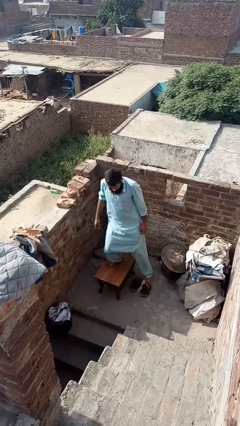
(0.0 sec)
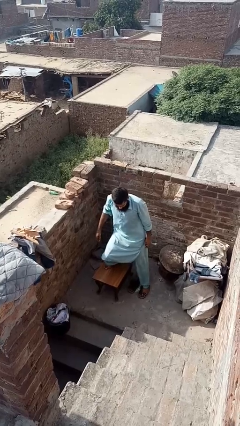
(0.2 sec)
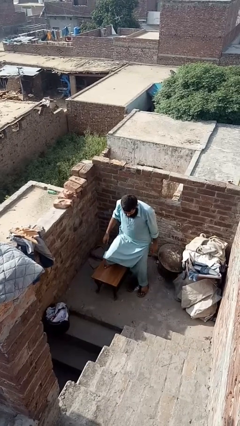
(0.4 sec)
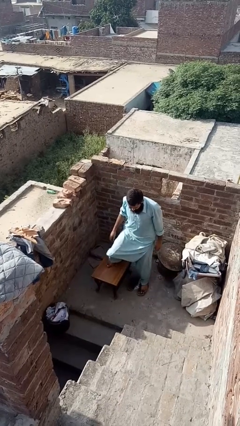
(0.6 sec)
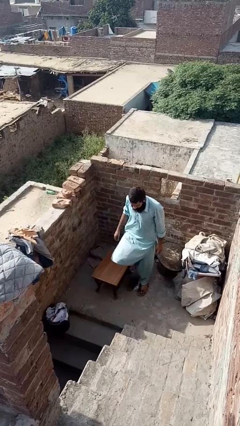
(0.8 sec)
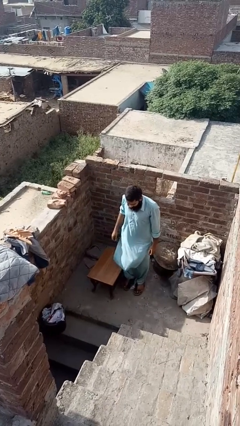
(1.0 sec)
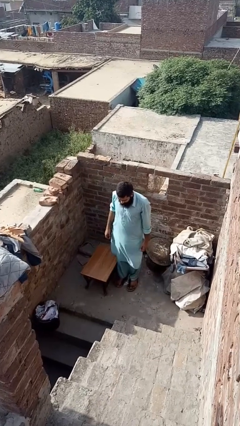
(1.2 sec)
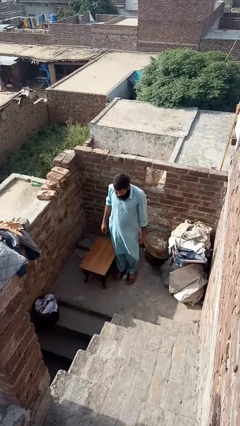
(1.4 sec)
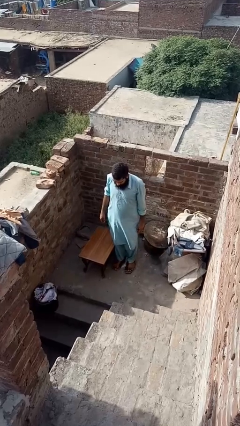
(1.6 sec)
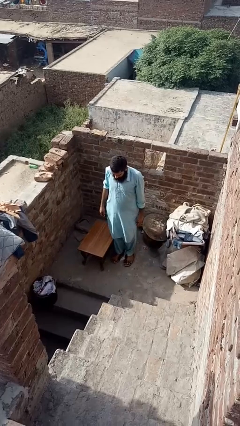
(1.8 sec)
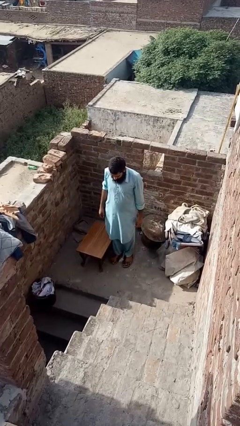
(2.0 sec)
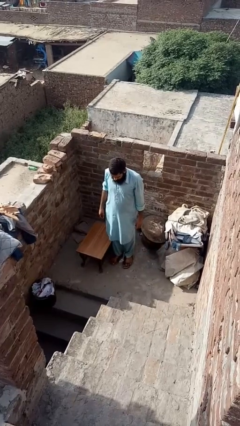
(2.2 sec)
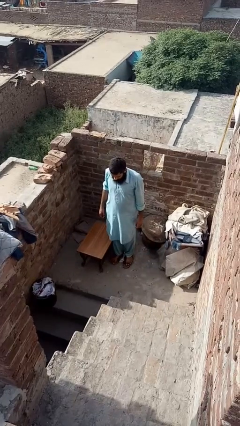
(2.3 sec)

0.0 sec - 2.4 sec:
person climbs off table

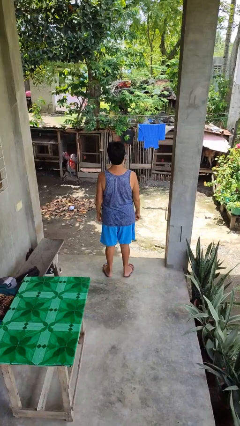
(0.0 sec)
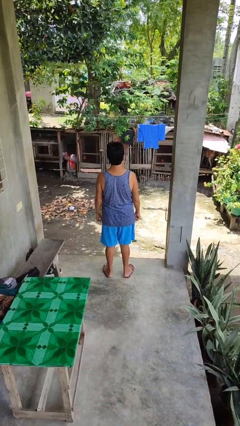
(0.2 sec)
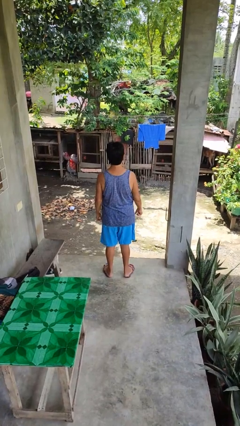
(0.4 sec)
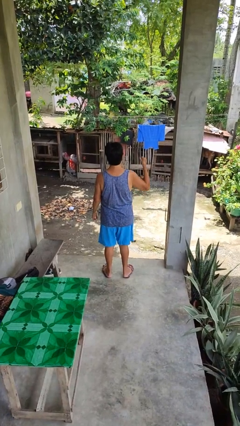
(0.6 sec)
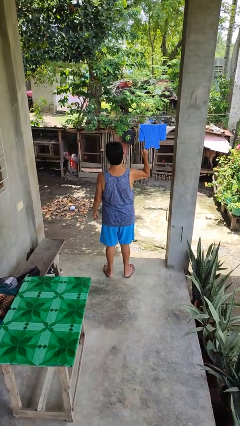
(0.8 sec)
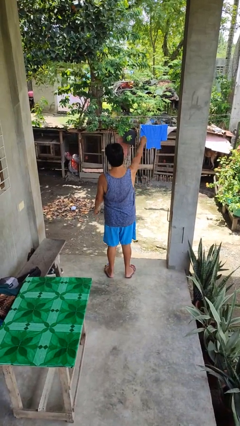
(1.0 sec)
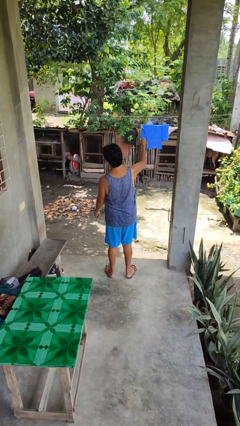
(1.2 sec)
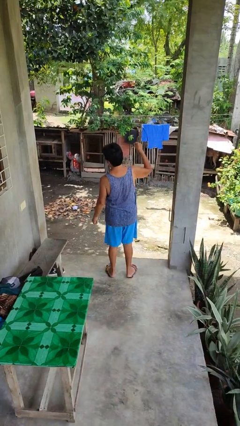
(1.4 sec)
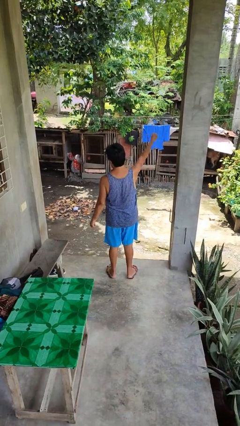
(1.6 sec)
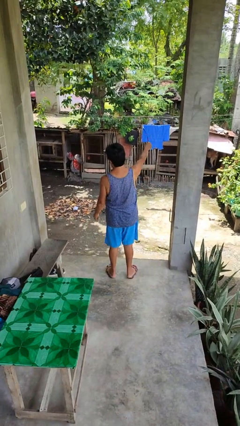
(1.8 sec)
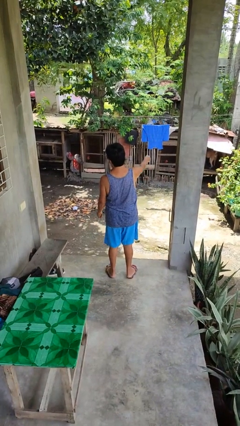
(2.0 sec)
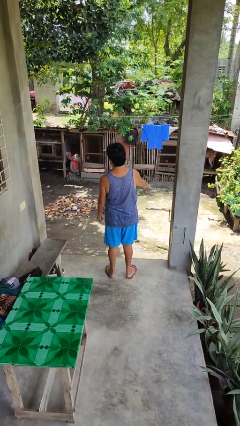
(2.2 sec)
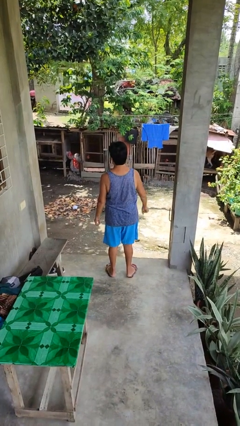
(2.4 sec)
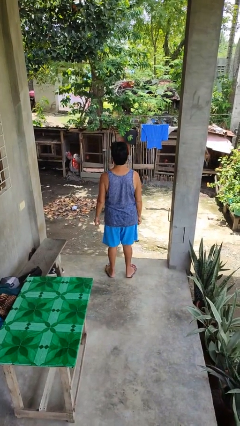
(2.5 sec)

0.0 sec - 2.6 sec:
person punches

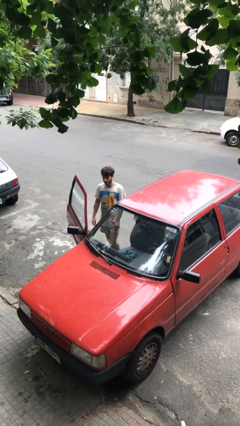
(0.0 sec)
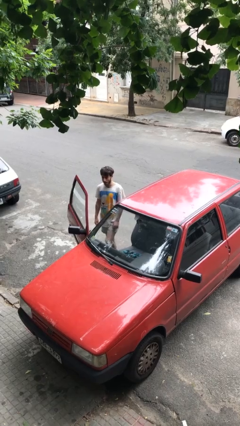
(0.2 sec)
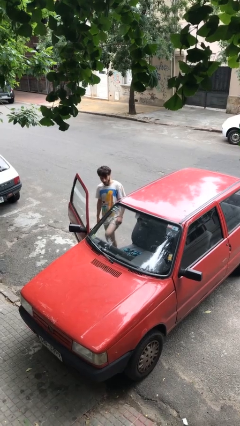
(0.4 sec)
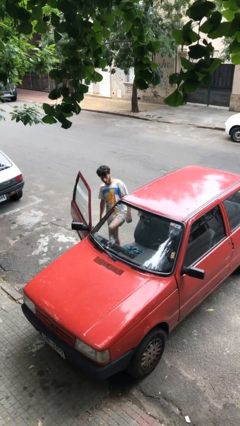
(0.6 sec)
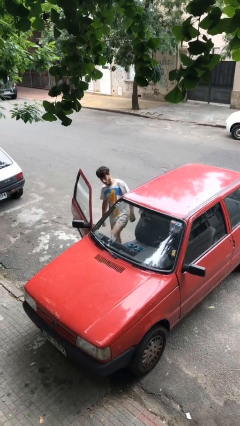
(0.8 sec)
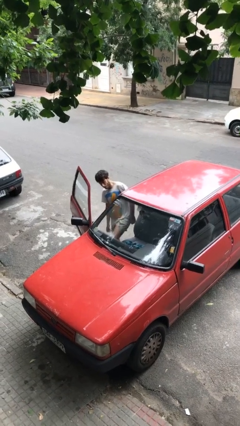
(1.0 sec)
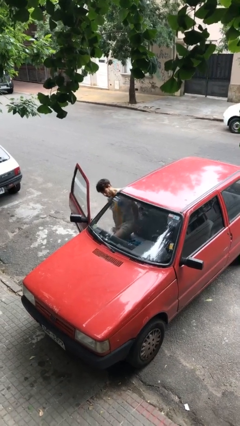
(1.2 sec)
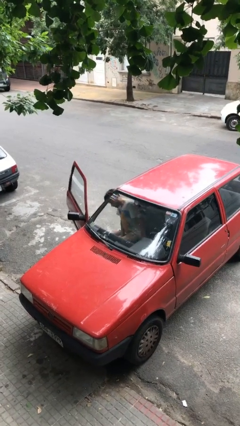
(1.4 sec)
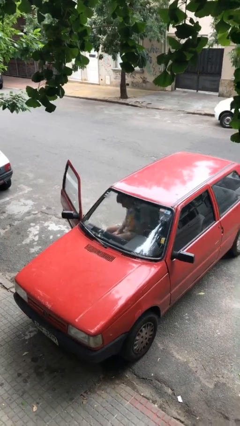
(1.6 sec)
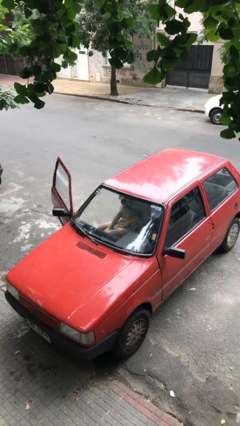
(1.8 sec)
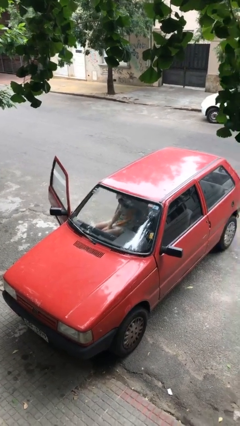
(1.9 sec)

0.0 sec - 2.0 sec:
person enters car

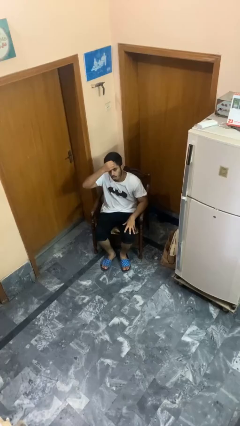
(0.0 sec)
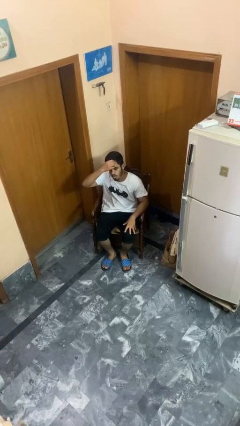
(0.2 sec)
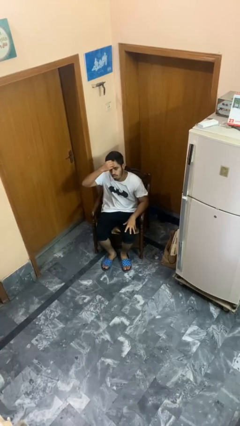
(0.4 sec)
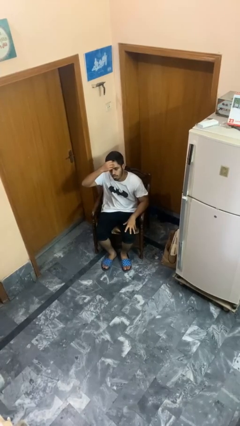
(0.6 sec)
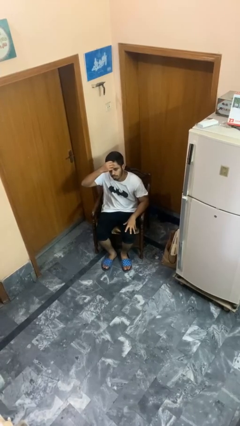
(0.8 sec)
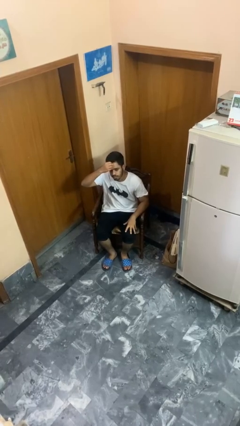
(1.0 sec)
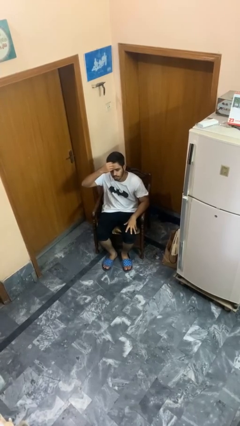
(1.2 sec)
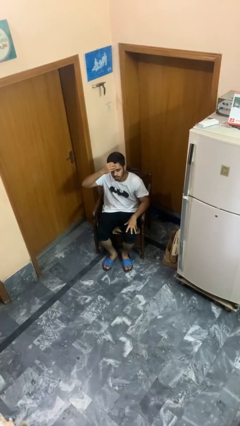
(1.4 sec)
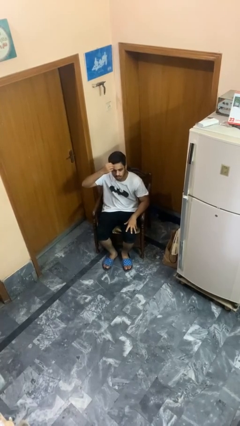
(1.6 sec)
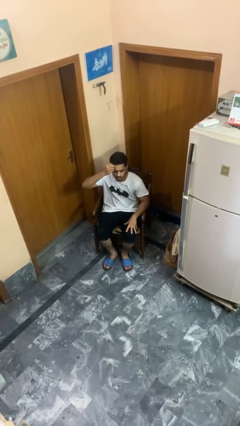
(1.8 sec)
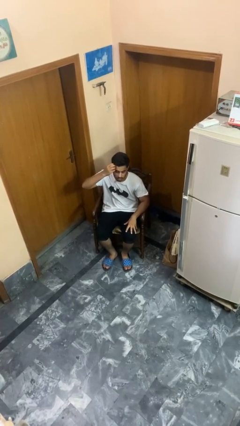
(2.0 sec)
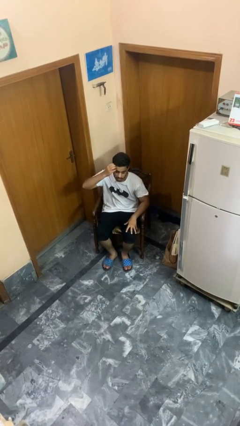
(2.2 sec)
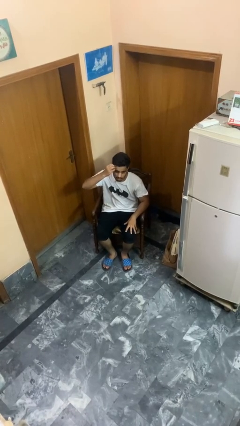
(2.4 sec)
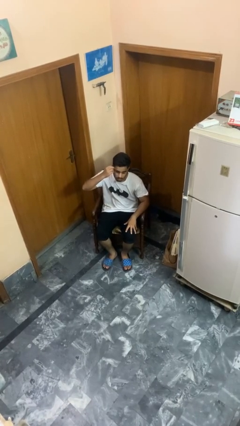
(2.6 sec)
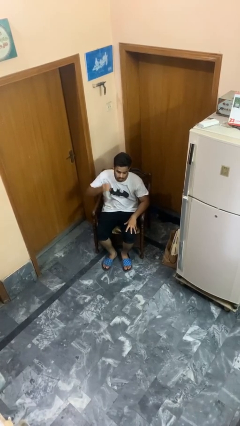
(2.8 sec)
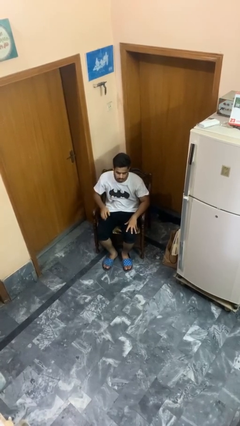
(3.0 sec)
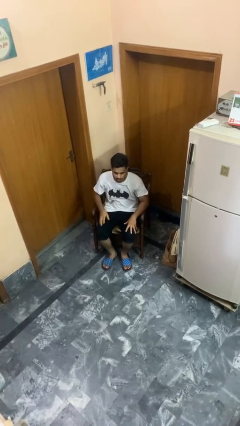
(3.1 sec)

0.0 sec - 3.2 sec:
person scratches face

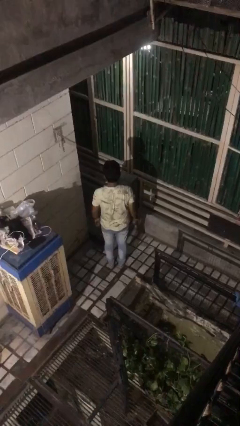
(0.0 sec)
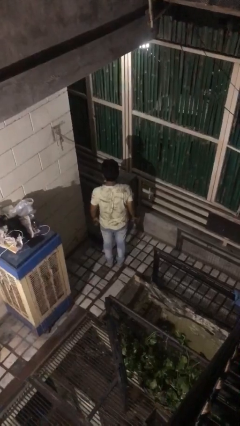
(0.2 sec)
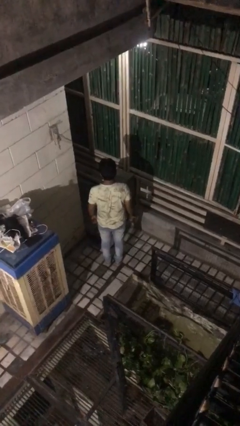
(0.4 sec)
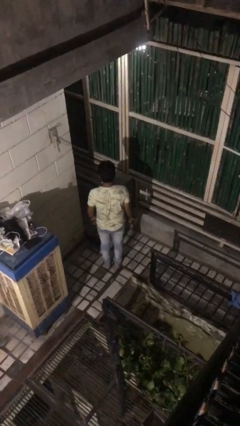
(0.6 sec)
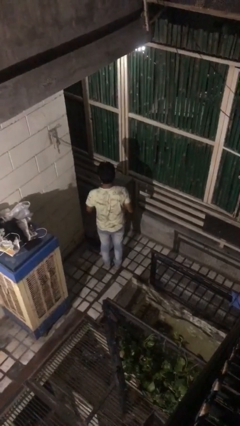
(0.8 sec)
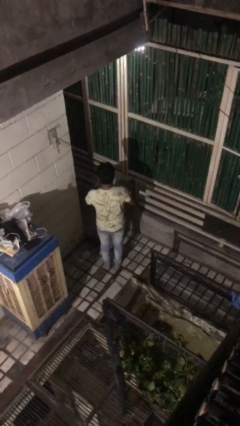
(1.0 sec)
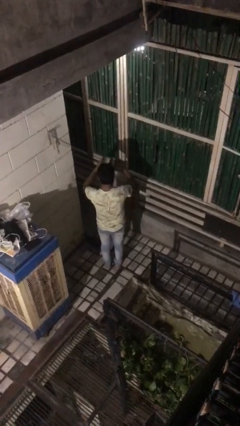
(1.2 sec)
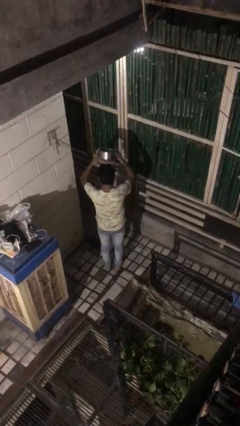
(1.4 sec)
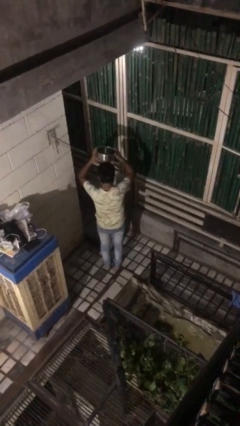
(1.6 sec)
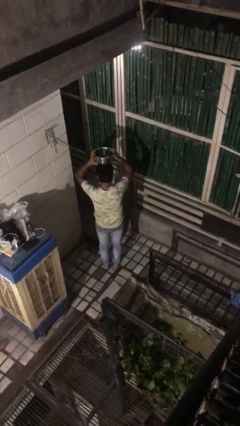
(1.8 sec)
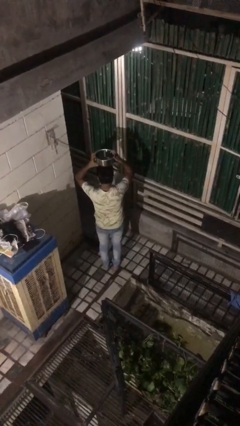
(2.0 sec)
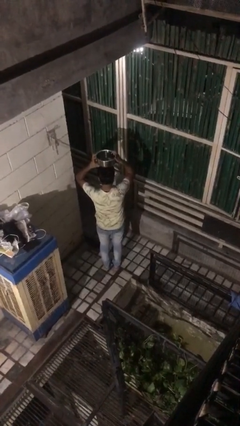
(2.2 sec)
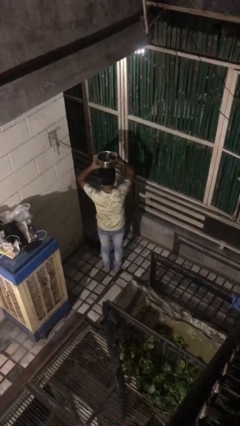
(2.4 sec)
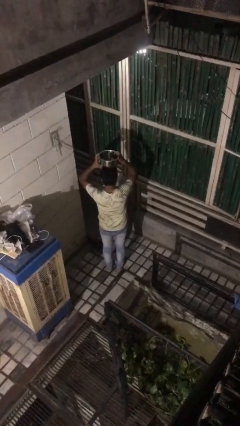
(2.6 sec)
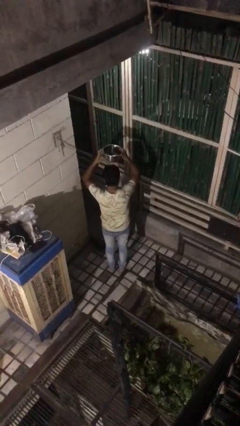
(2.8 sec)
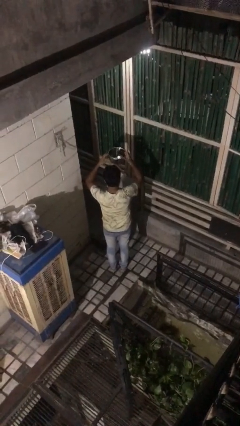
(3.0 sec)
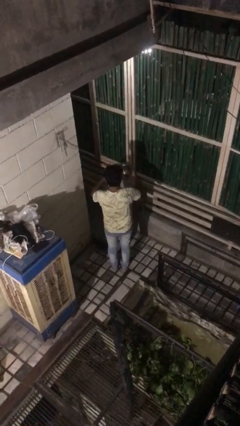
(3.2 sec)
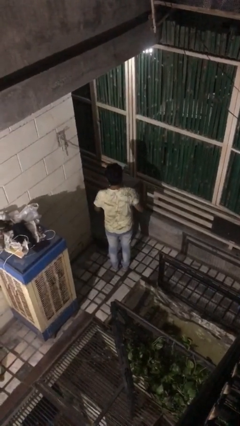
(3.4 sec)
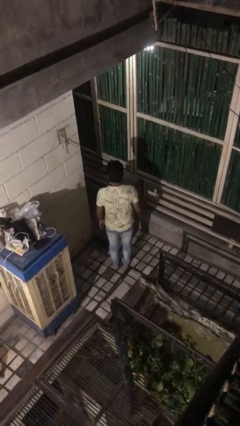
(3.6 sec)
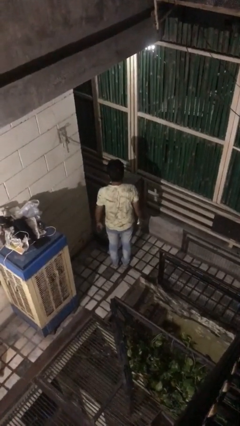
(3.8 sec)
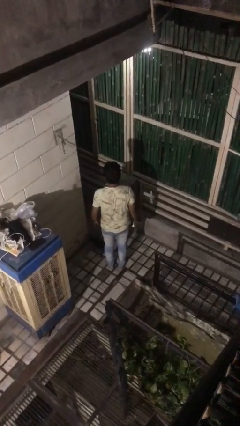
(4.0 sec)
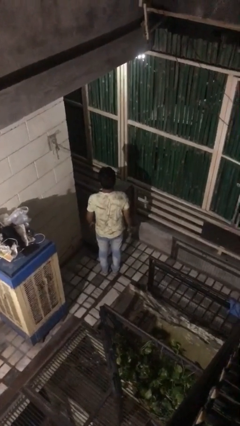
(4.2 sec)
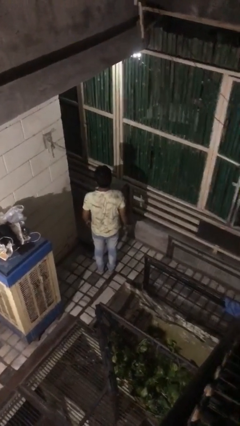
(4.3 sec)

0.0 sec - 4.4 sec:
person holds object above head

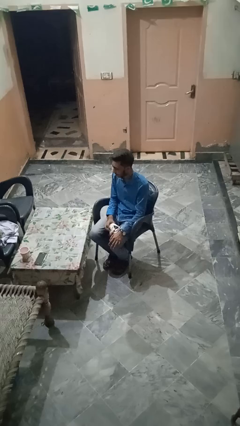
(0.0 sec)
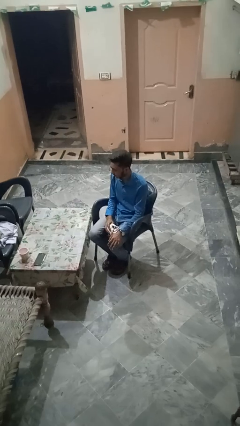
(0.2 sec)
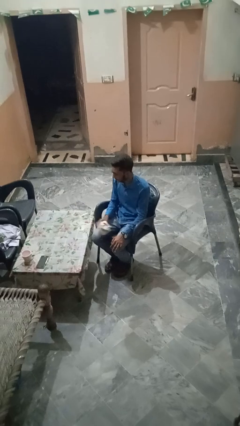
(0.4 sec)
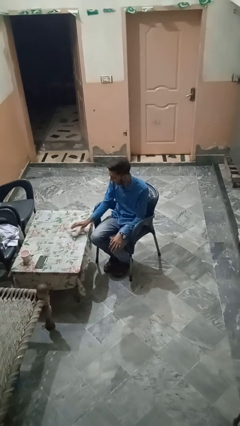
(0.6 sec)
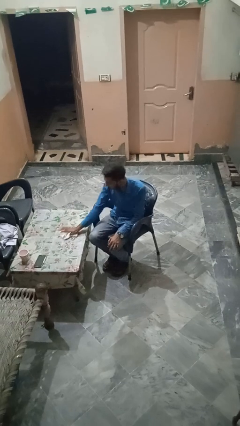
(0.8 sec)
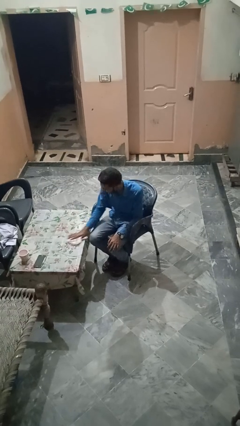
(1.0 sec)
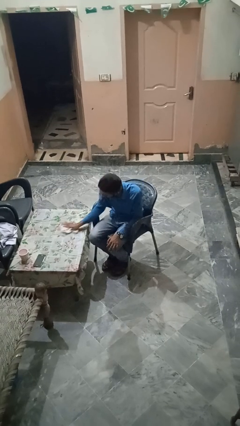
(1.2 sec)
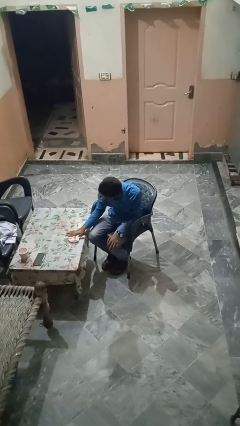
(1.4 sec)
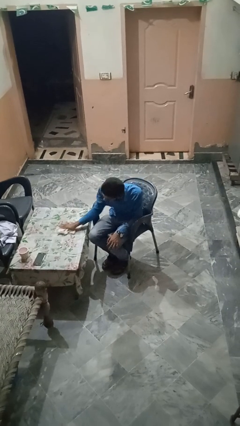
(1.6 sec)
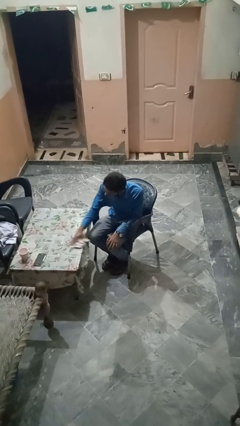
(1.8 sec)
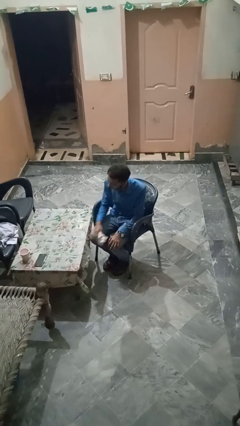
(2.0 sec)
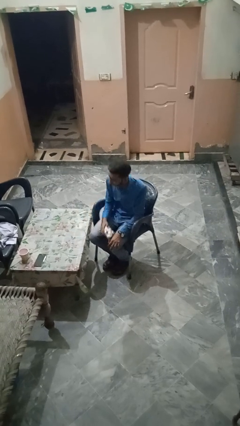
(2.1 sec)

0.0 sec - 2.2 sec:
person cleans table with rag
